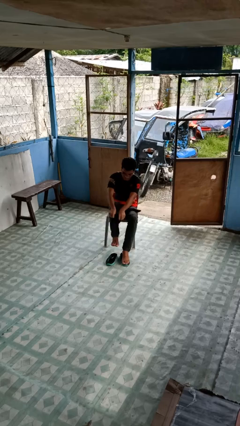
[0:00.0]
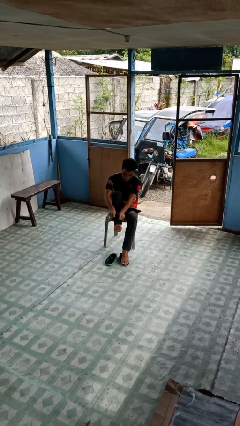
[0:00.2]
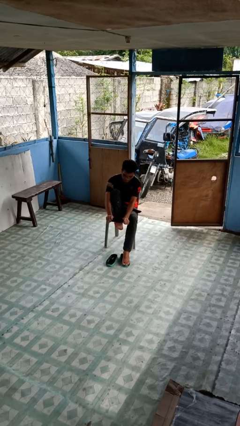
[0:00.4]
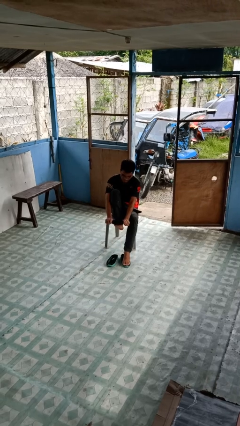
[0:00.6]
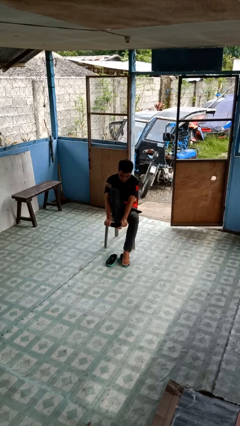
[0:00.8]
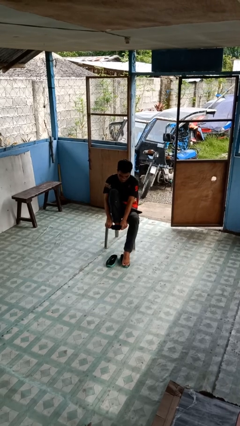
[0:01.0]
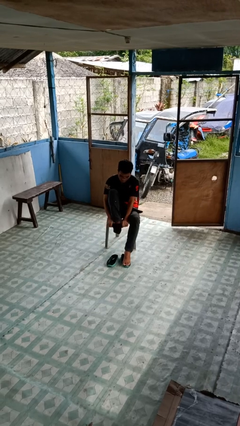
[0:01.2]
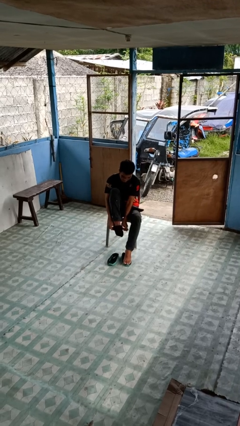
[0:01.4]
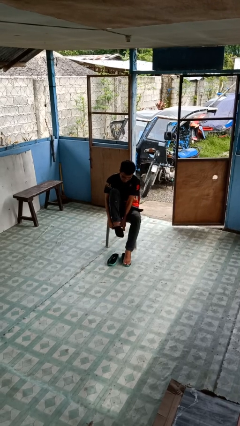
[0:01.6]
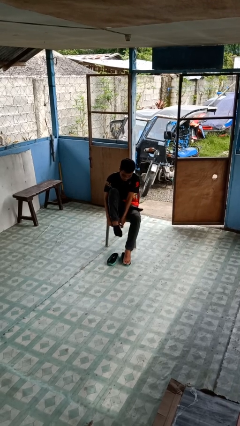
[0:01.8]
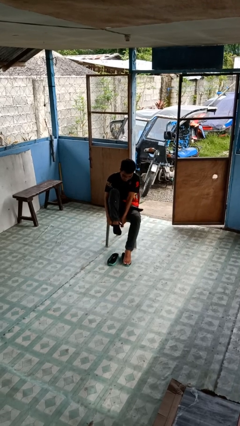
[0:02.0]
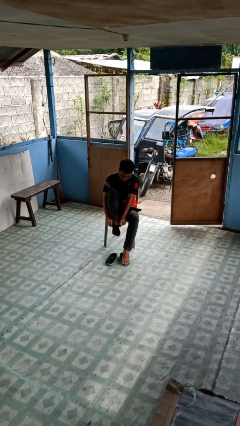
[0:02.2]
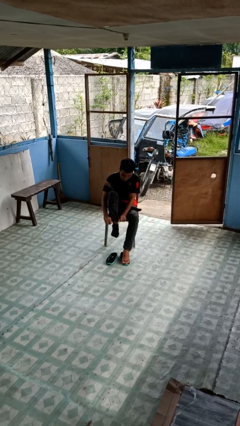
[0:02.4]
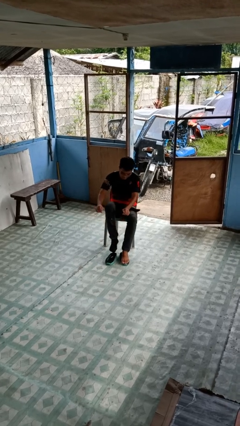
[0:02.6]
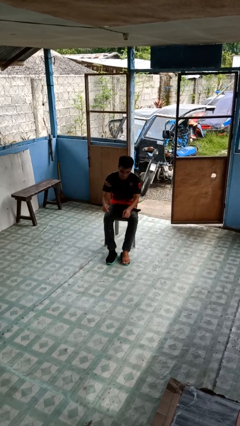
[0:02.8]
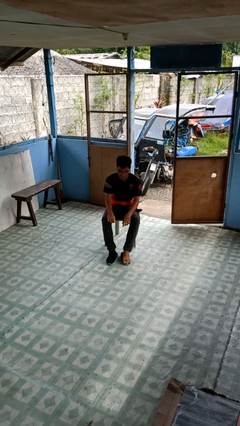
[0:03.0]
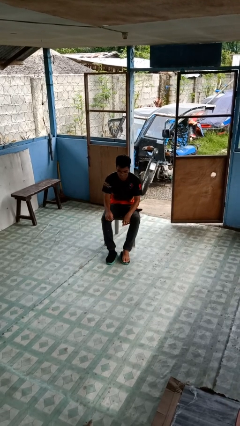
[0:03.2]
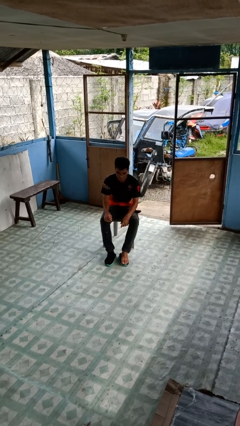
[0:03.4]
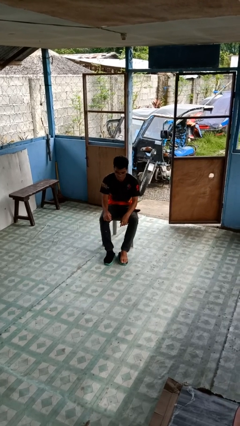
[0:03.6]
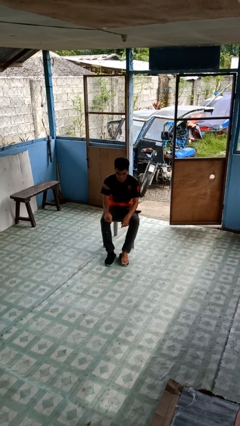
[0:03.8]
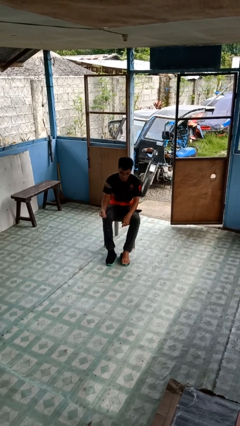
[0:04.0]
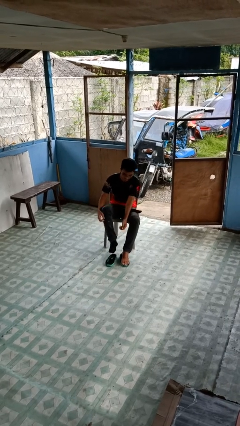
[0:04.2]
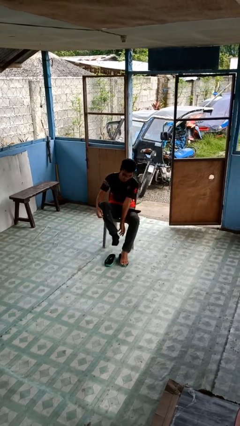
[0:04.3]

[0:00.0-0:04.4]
person puts on socks

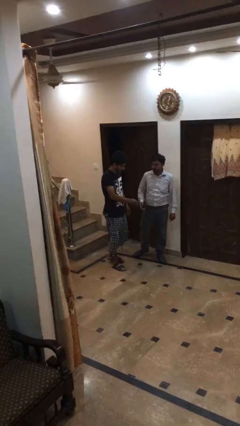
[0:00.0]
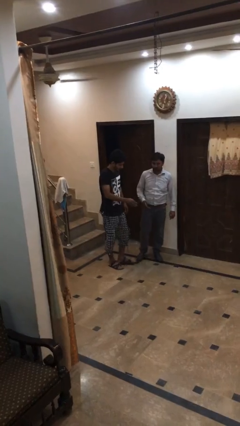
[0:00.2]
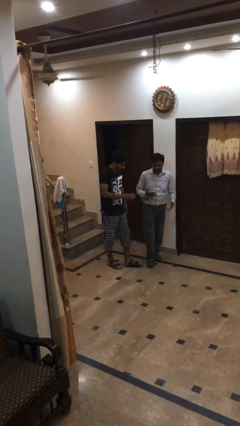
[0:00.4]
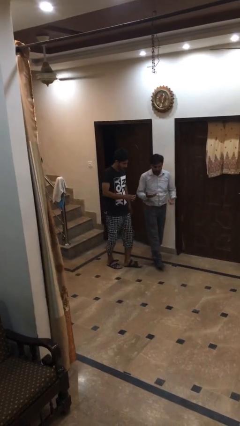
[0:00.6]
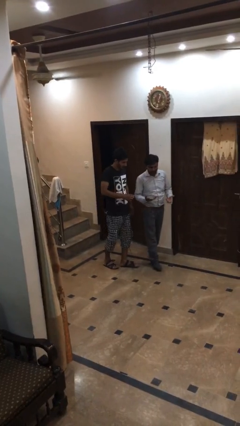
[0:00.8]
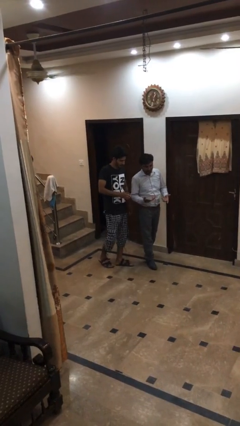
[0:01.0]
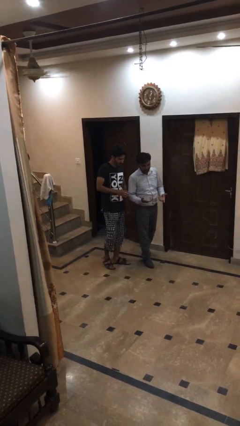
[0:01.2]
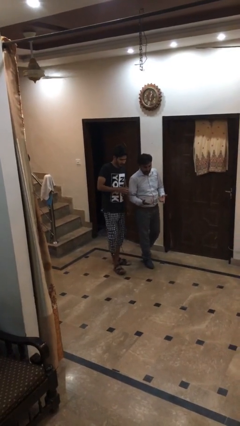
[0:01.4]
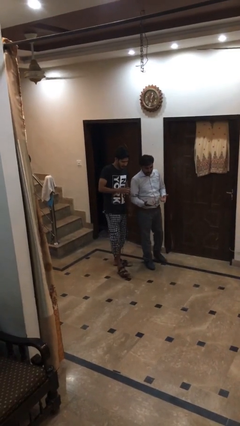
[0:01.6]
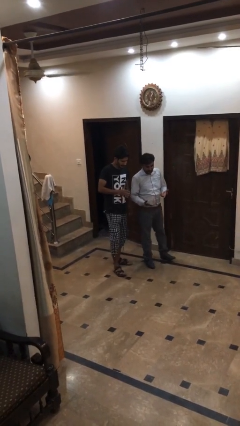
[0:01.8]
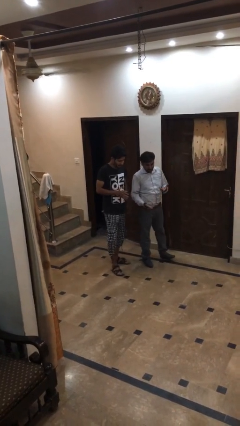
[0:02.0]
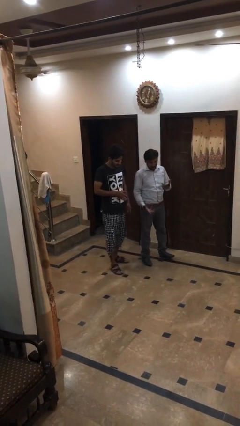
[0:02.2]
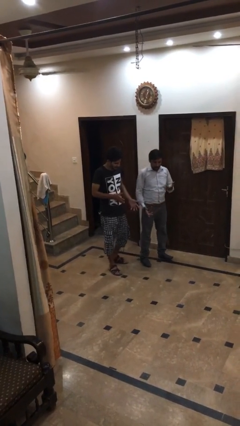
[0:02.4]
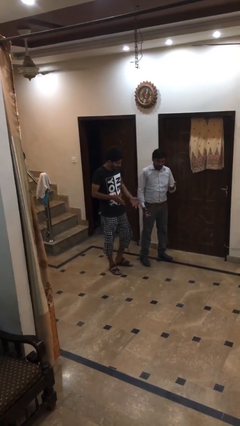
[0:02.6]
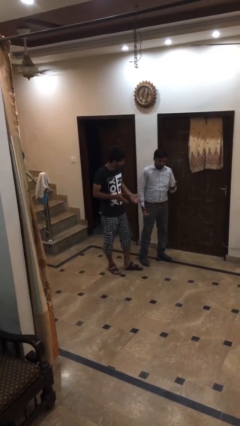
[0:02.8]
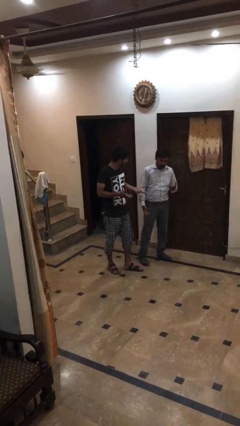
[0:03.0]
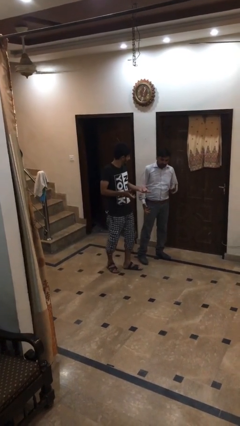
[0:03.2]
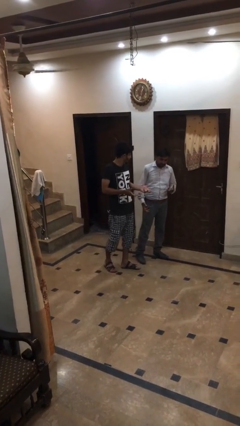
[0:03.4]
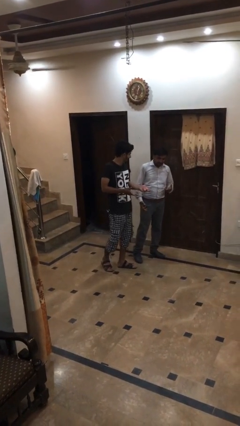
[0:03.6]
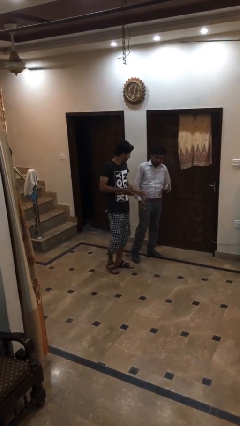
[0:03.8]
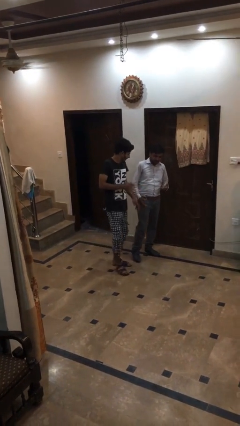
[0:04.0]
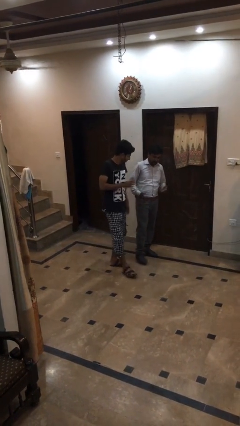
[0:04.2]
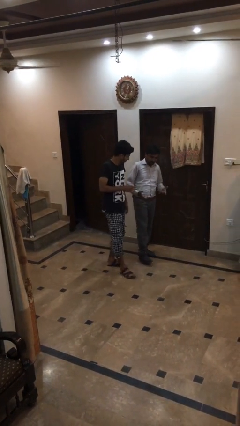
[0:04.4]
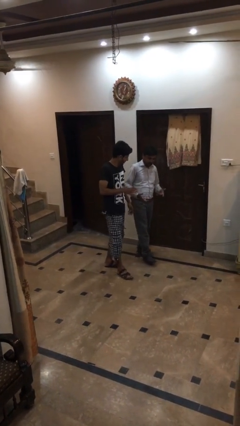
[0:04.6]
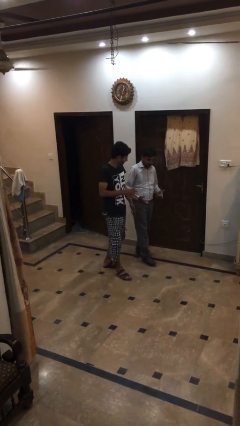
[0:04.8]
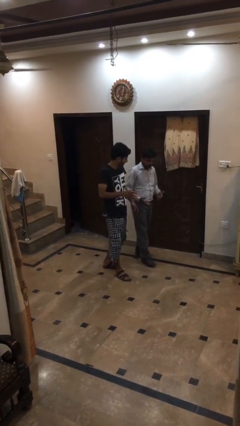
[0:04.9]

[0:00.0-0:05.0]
person talks to person

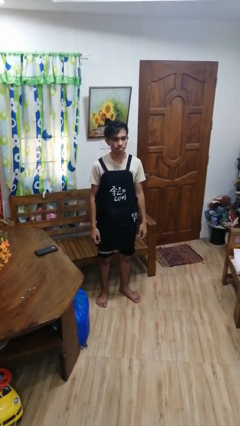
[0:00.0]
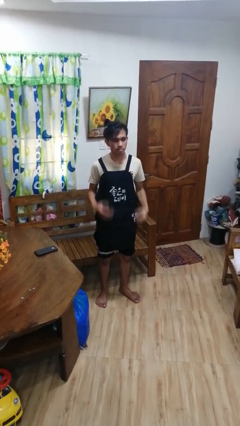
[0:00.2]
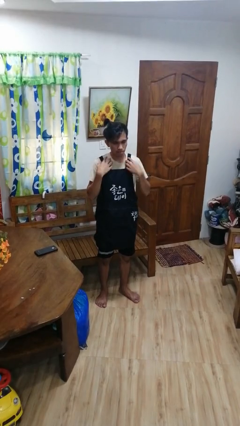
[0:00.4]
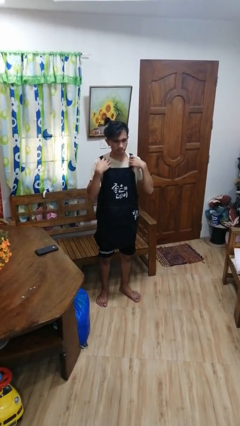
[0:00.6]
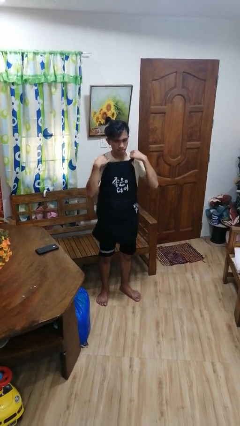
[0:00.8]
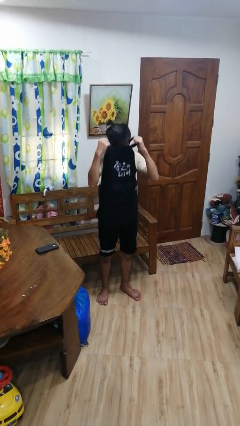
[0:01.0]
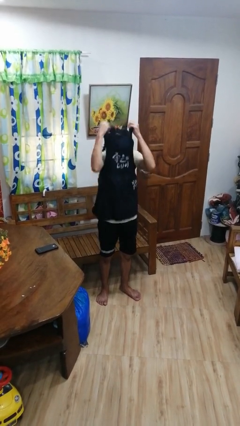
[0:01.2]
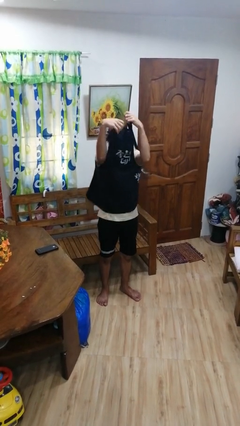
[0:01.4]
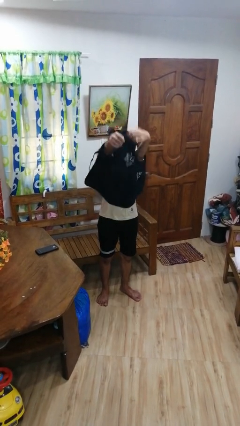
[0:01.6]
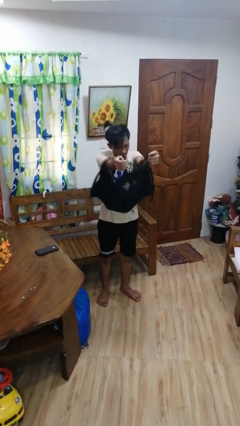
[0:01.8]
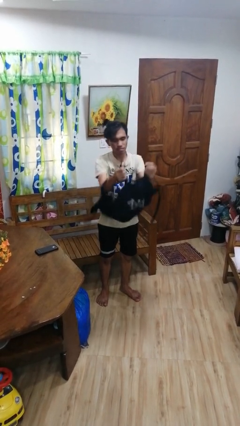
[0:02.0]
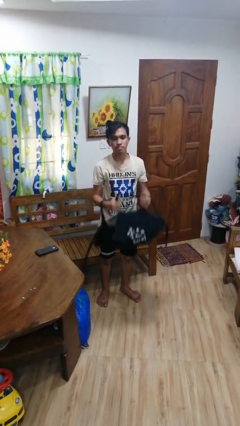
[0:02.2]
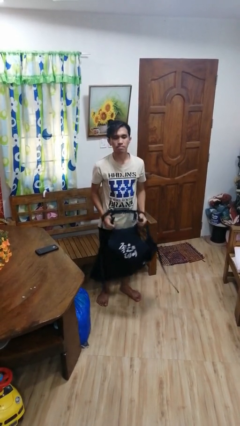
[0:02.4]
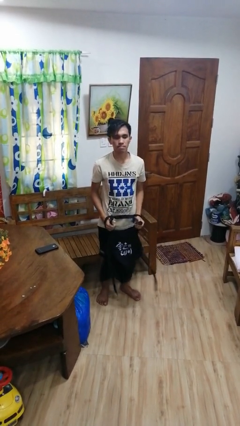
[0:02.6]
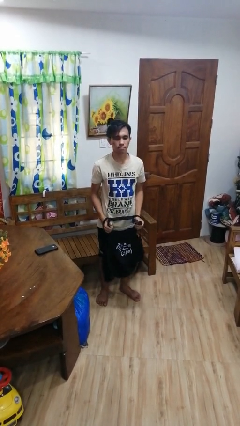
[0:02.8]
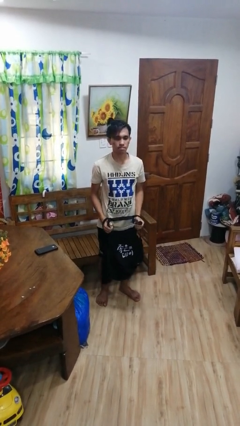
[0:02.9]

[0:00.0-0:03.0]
person takes off apron

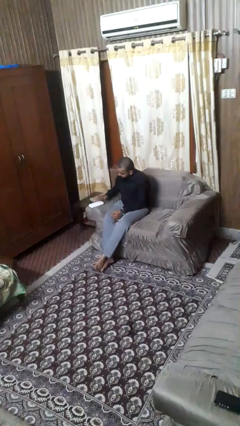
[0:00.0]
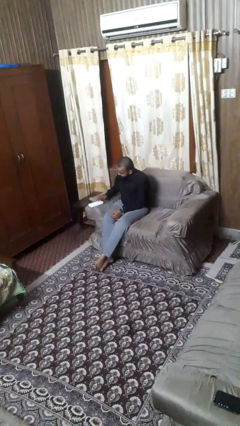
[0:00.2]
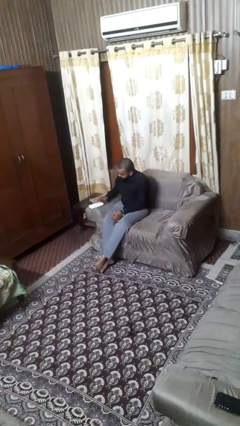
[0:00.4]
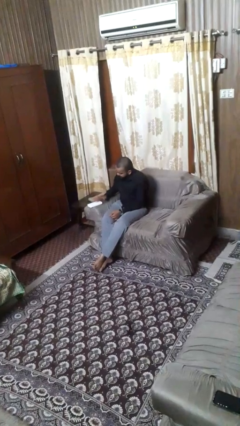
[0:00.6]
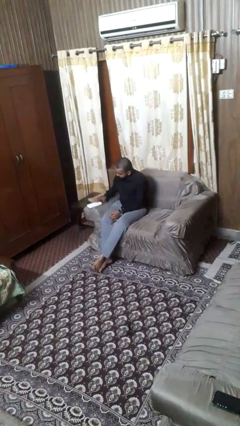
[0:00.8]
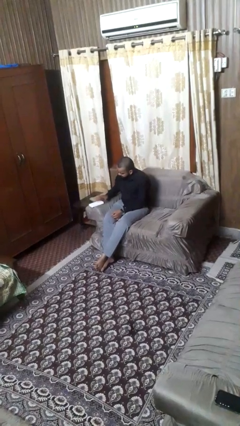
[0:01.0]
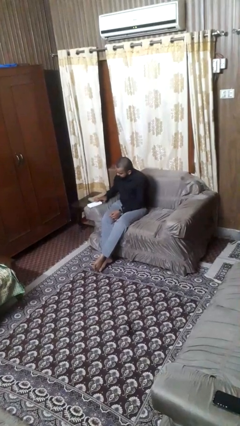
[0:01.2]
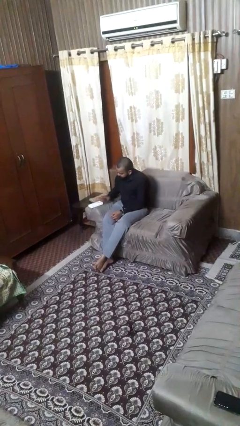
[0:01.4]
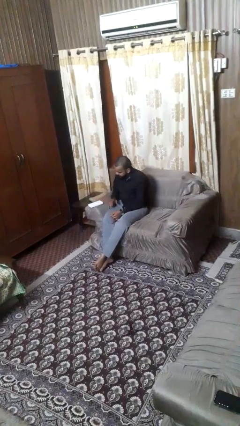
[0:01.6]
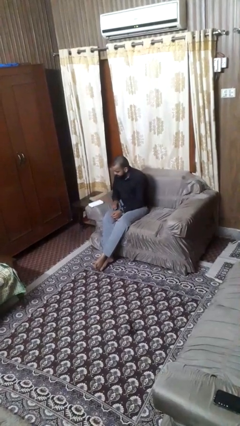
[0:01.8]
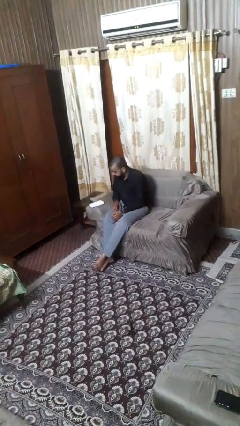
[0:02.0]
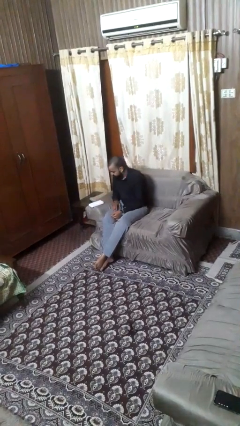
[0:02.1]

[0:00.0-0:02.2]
person taps object with finger

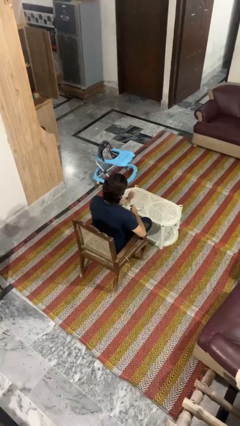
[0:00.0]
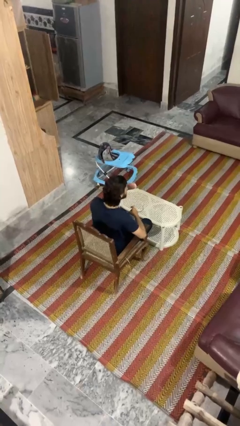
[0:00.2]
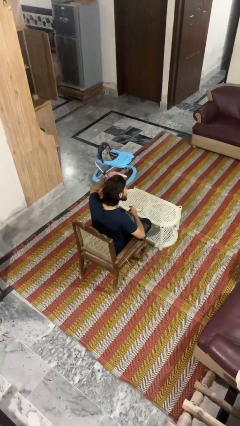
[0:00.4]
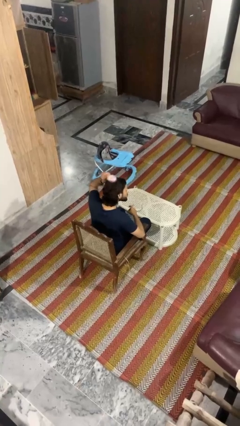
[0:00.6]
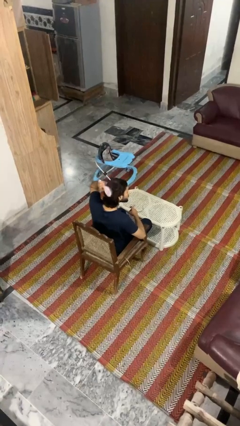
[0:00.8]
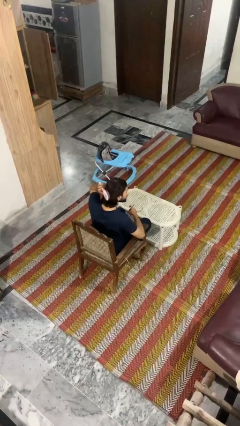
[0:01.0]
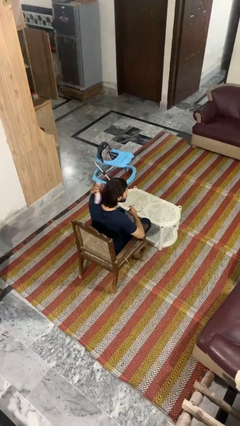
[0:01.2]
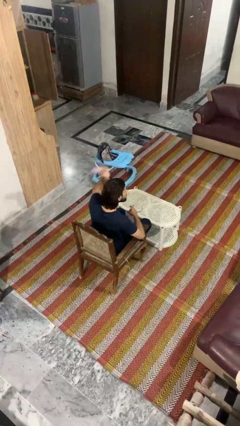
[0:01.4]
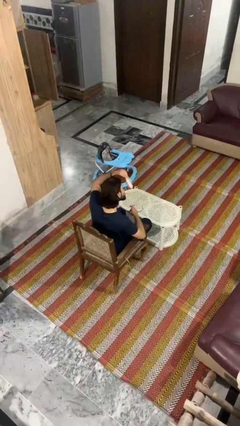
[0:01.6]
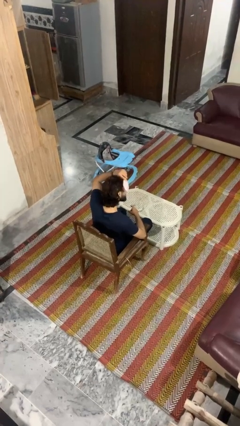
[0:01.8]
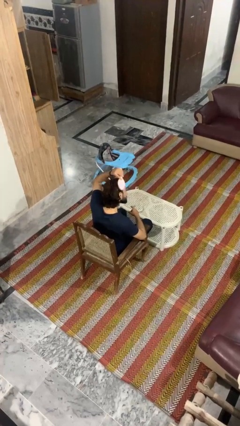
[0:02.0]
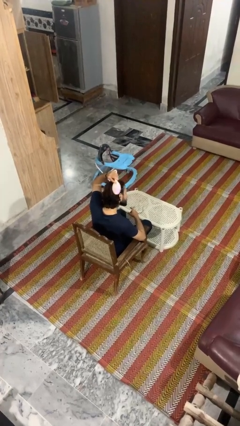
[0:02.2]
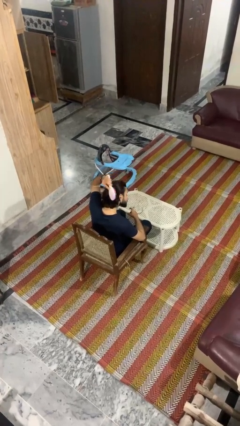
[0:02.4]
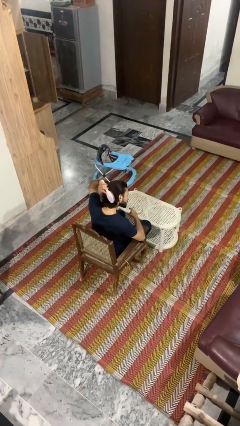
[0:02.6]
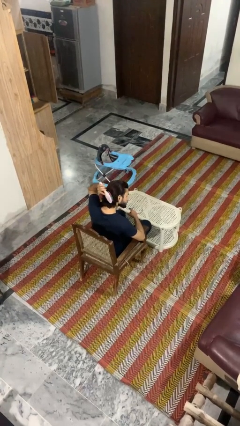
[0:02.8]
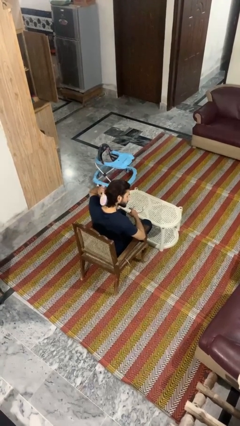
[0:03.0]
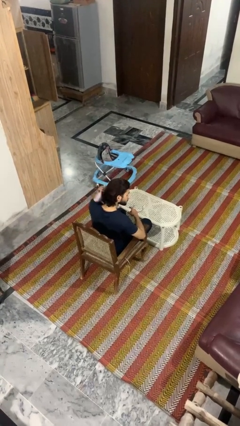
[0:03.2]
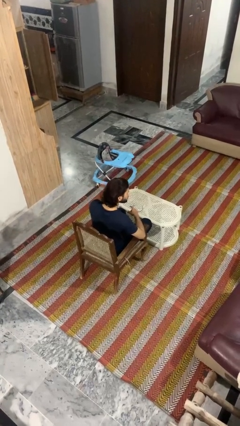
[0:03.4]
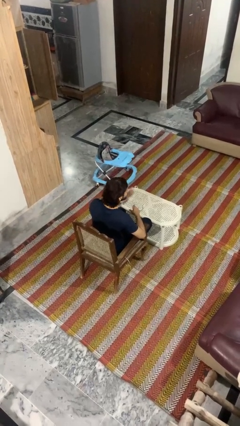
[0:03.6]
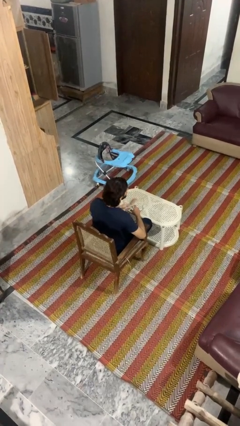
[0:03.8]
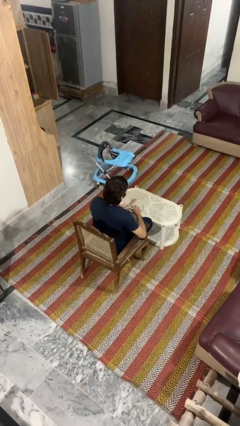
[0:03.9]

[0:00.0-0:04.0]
person brushes hair
